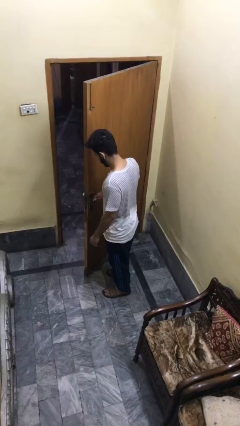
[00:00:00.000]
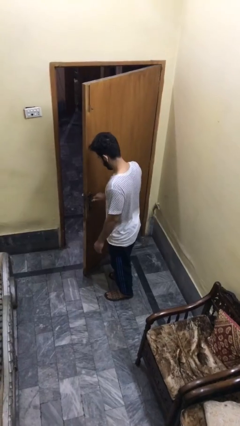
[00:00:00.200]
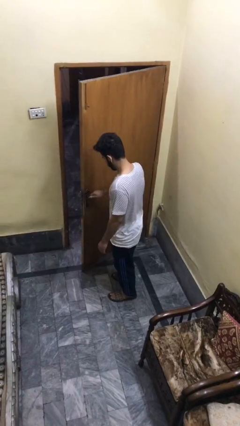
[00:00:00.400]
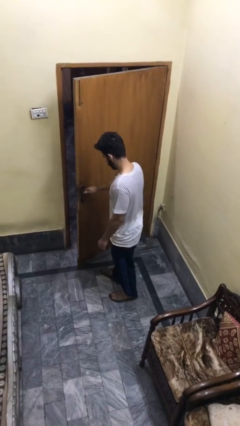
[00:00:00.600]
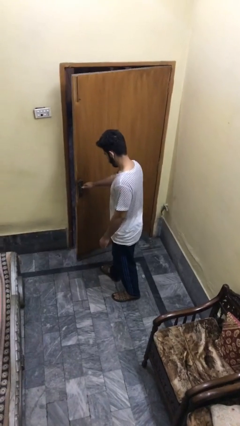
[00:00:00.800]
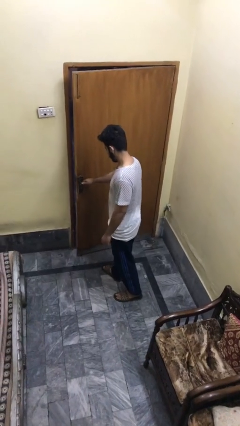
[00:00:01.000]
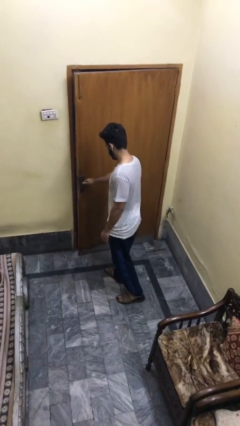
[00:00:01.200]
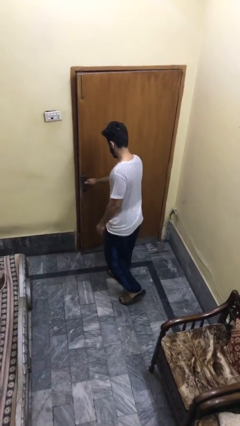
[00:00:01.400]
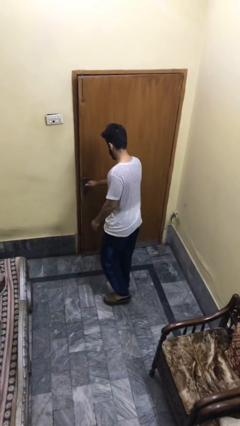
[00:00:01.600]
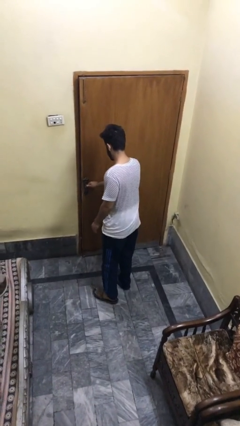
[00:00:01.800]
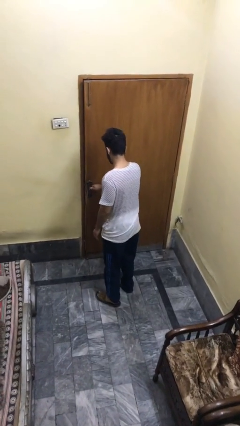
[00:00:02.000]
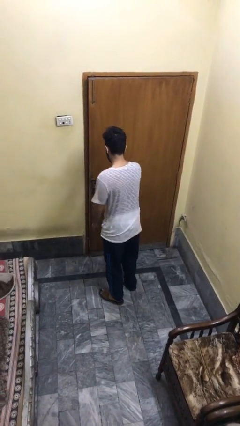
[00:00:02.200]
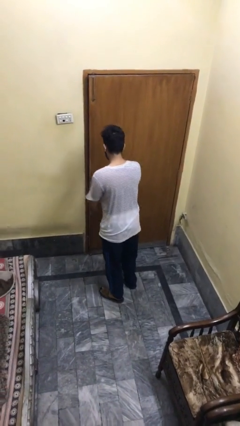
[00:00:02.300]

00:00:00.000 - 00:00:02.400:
person closes facility door

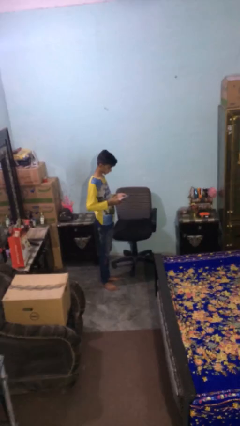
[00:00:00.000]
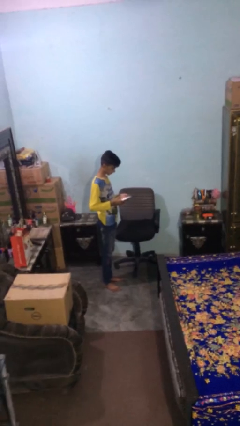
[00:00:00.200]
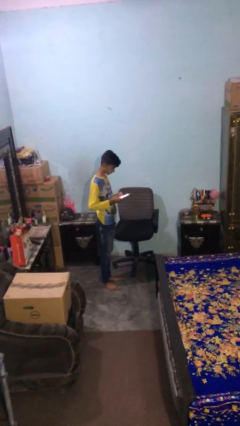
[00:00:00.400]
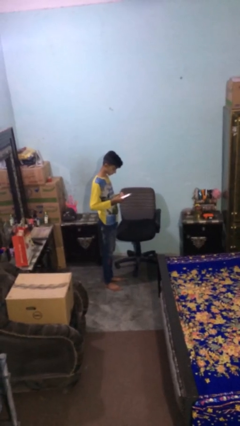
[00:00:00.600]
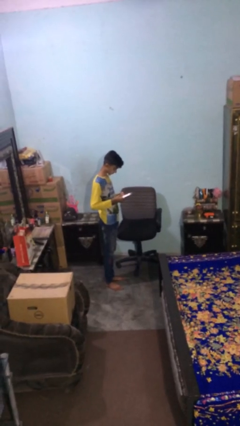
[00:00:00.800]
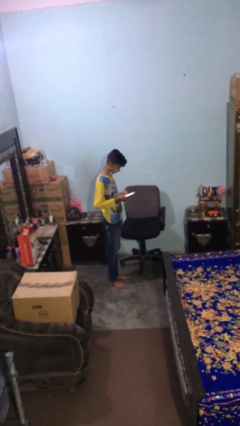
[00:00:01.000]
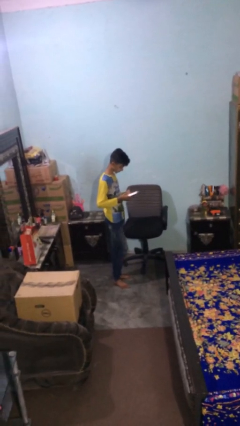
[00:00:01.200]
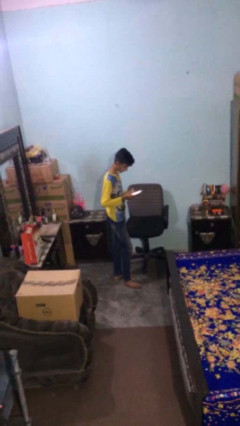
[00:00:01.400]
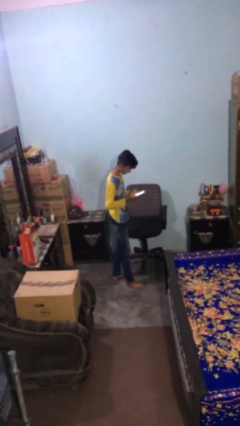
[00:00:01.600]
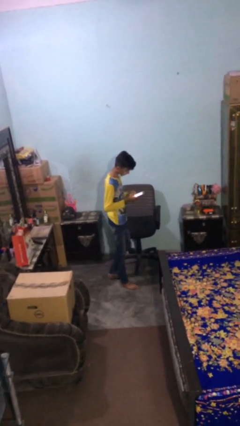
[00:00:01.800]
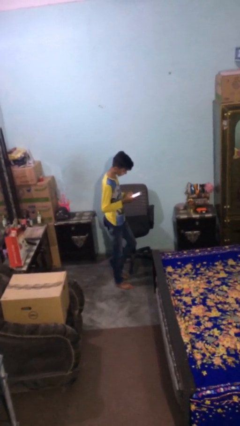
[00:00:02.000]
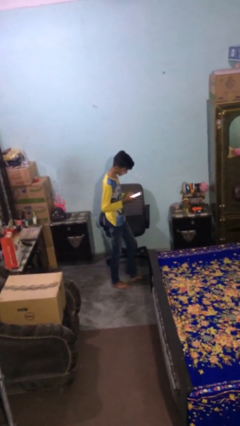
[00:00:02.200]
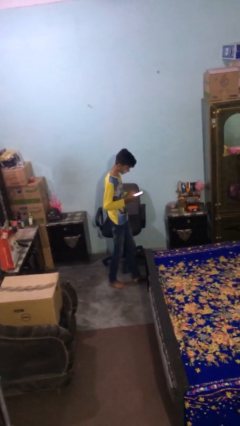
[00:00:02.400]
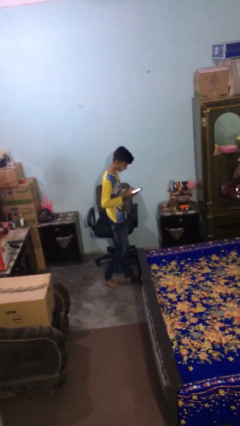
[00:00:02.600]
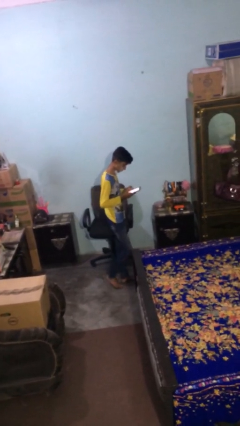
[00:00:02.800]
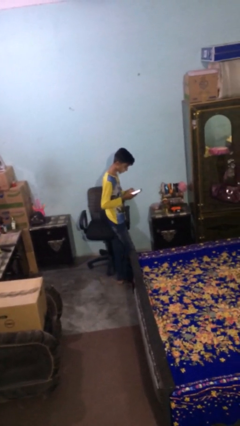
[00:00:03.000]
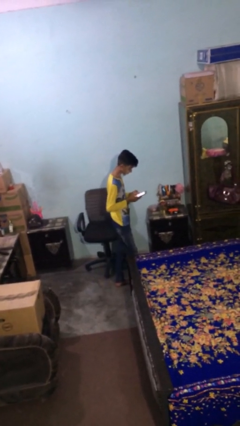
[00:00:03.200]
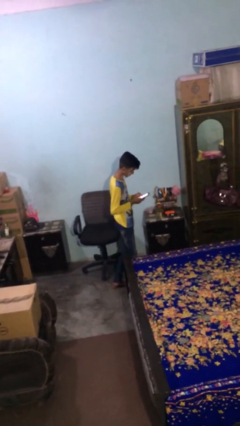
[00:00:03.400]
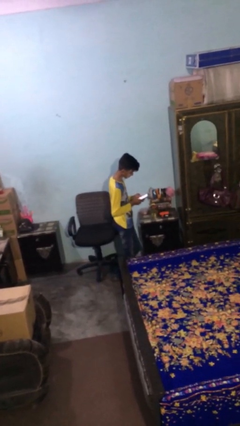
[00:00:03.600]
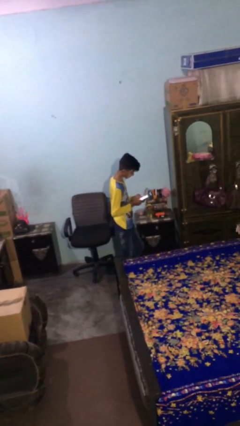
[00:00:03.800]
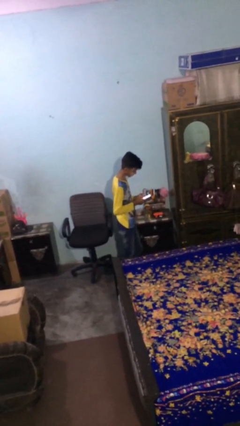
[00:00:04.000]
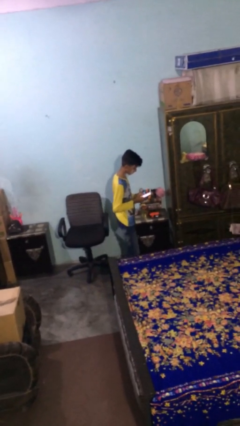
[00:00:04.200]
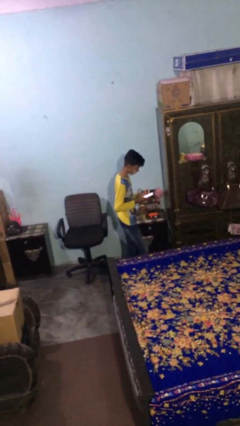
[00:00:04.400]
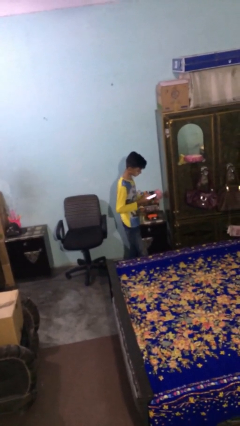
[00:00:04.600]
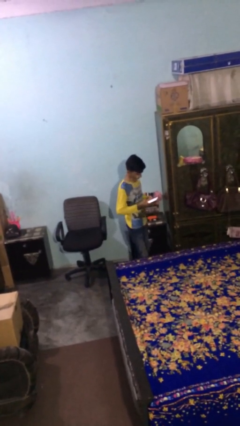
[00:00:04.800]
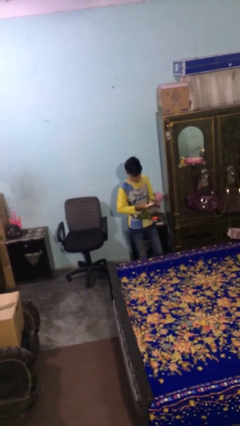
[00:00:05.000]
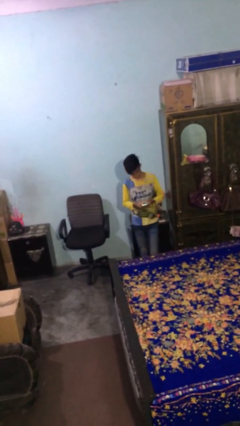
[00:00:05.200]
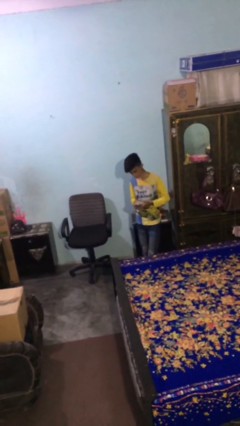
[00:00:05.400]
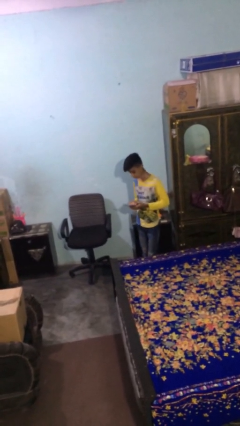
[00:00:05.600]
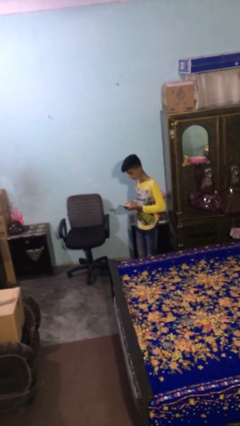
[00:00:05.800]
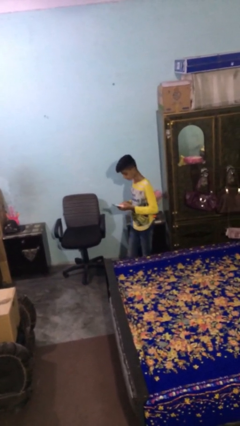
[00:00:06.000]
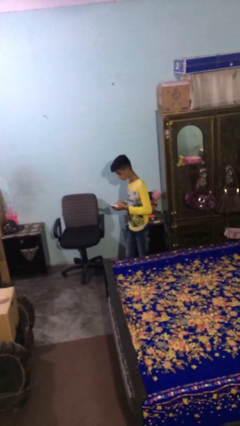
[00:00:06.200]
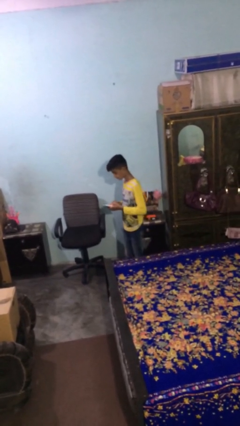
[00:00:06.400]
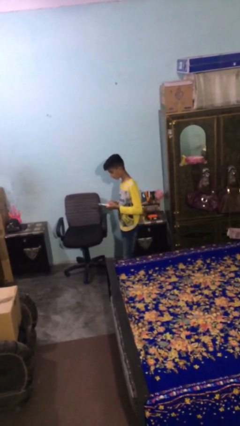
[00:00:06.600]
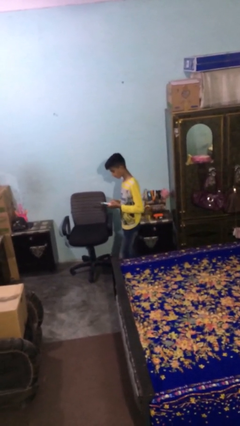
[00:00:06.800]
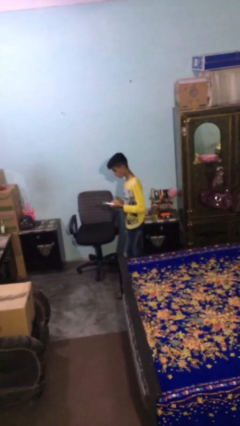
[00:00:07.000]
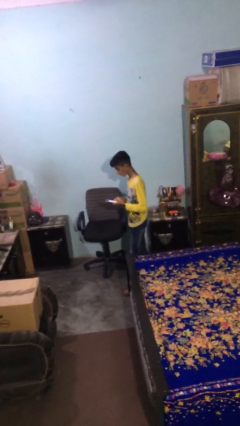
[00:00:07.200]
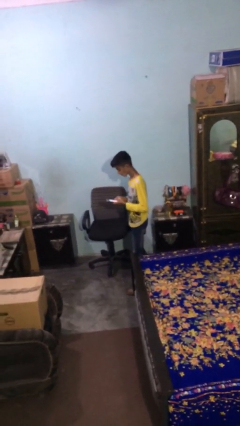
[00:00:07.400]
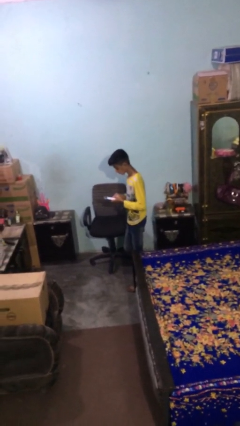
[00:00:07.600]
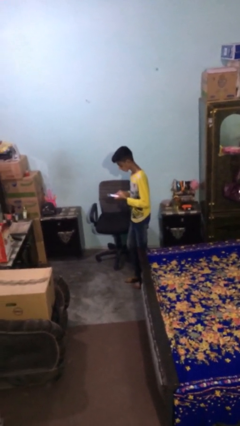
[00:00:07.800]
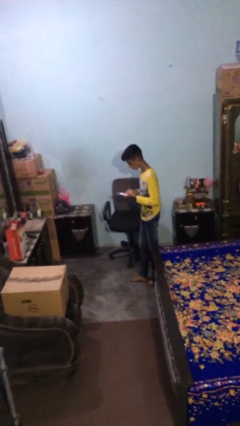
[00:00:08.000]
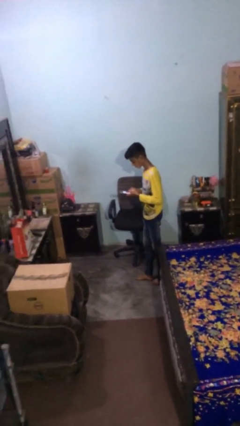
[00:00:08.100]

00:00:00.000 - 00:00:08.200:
person texts on phone

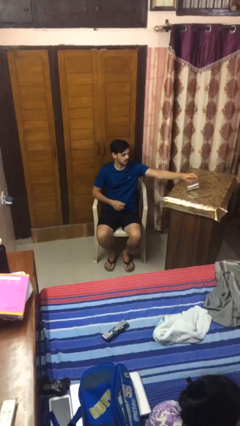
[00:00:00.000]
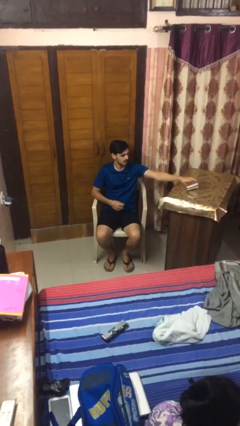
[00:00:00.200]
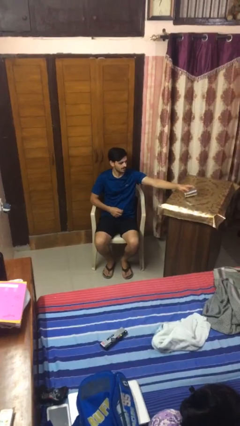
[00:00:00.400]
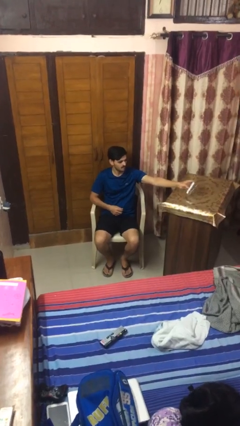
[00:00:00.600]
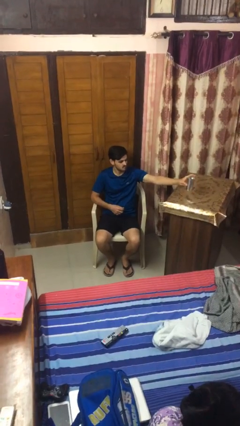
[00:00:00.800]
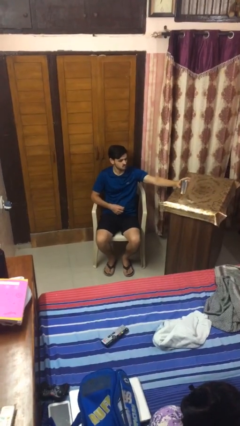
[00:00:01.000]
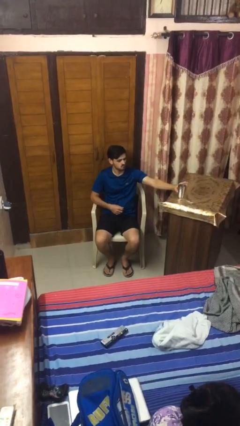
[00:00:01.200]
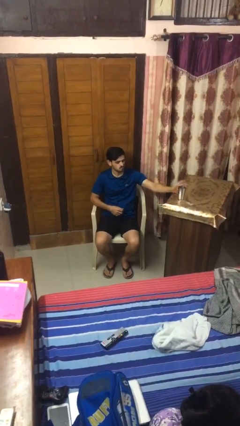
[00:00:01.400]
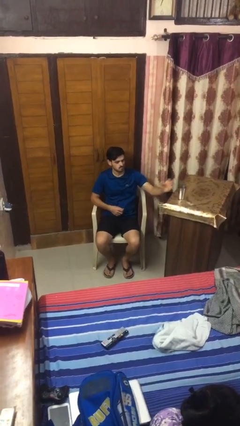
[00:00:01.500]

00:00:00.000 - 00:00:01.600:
person sets upright glass

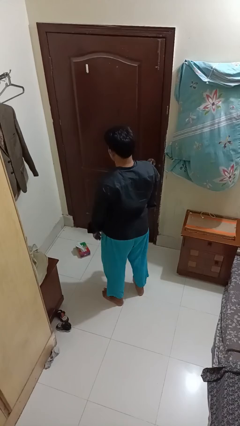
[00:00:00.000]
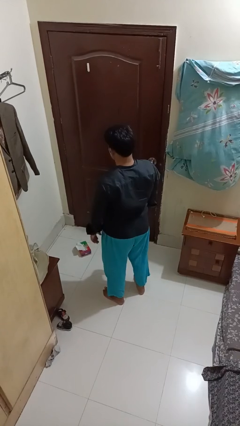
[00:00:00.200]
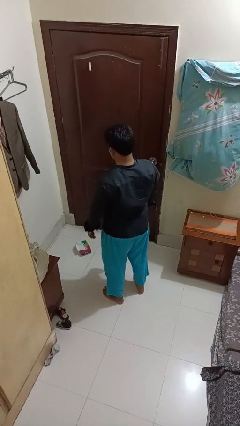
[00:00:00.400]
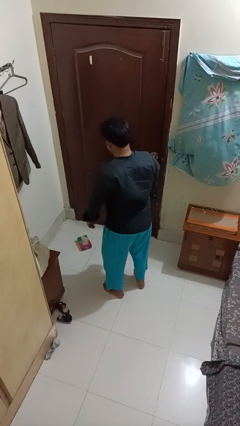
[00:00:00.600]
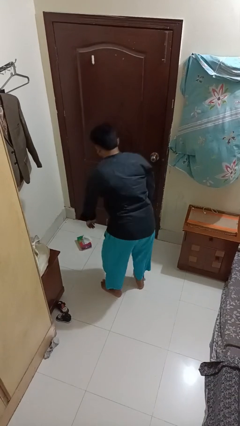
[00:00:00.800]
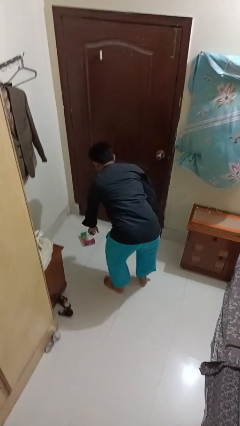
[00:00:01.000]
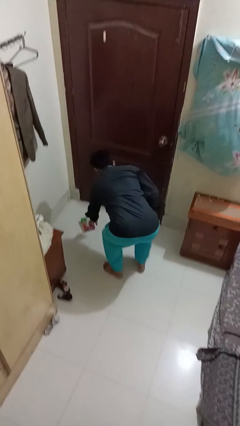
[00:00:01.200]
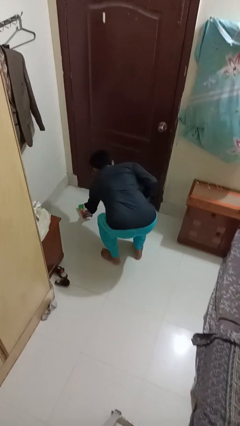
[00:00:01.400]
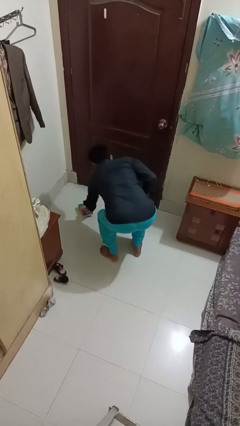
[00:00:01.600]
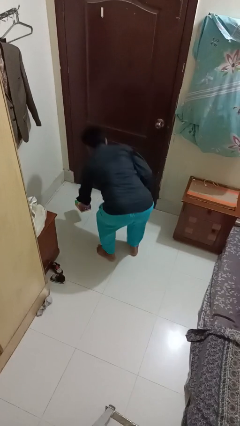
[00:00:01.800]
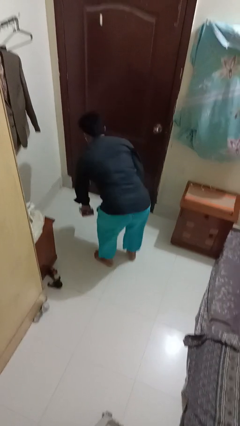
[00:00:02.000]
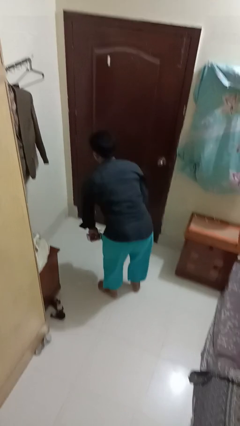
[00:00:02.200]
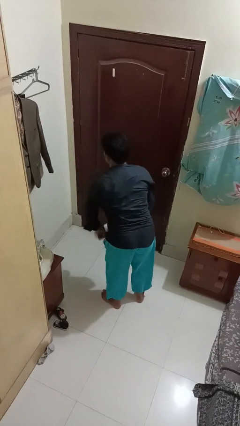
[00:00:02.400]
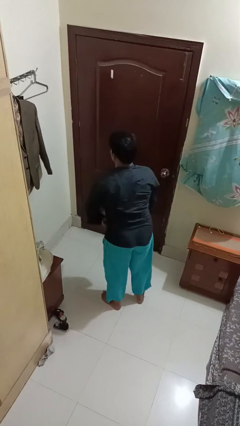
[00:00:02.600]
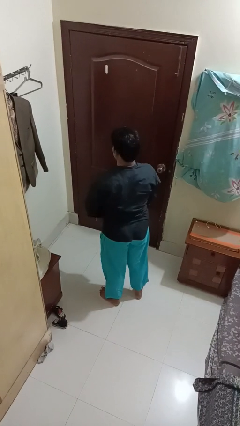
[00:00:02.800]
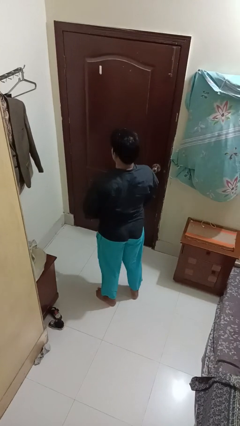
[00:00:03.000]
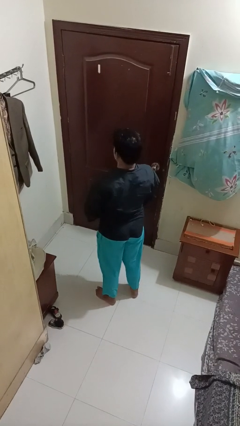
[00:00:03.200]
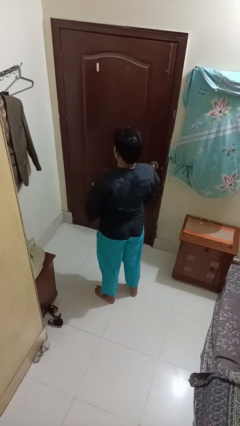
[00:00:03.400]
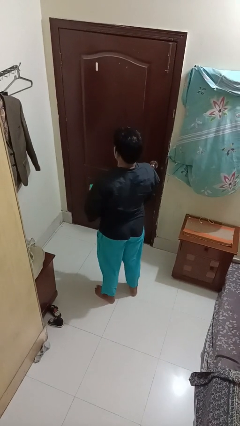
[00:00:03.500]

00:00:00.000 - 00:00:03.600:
person picks up object from floor

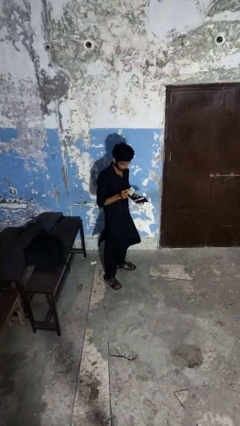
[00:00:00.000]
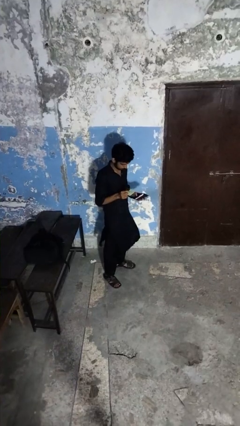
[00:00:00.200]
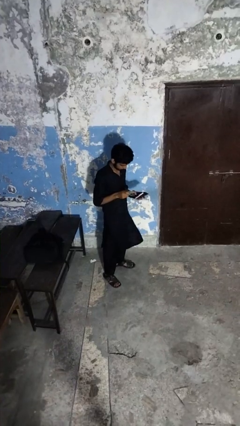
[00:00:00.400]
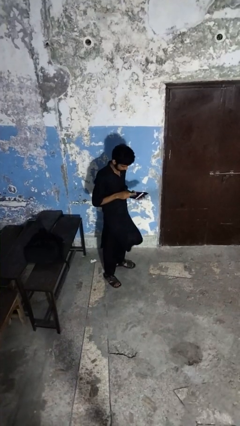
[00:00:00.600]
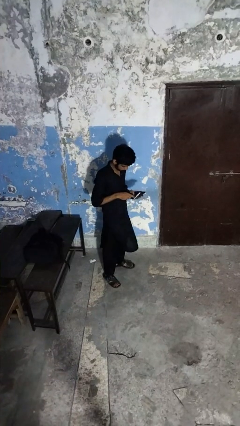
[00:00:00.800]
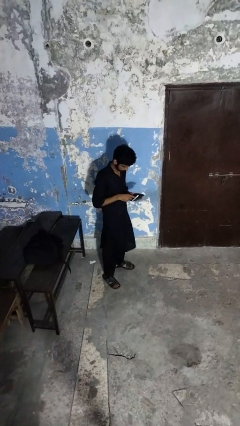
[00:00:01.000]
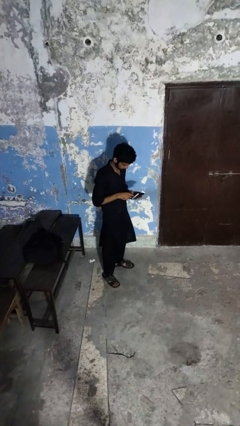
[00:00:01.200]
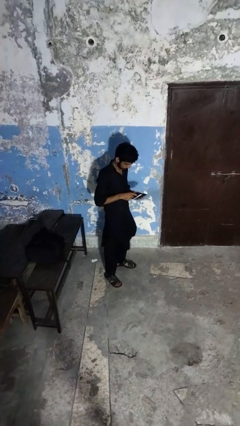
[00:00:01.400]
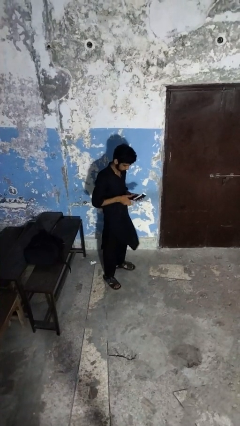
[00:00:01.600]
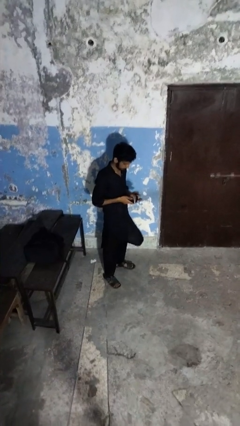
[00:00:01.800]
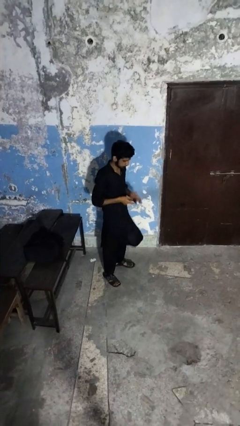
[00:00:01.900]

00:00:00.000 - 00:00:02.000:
person puts object into purse
